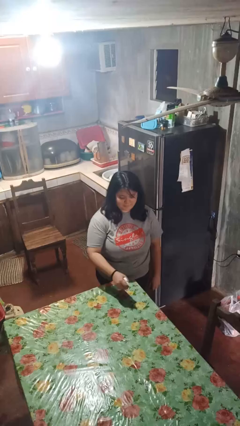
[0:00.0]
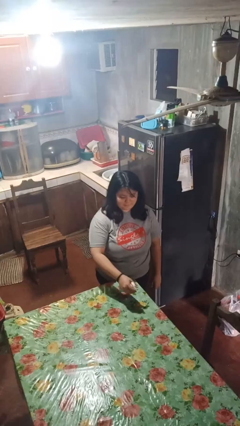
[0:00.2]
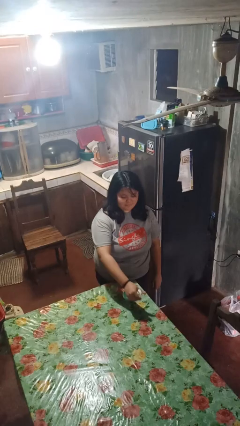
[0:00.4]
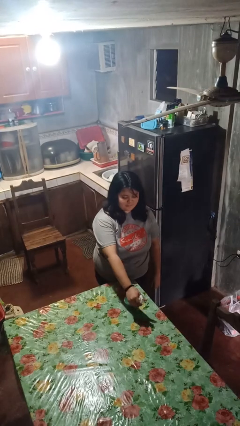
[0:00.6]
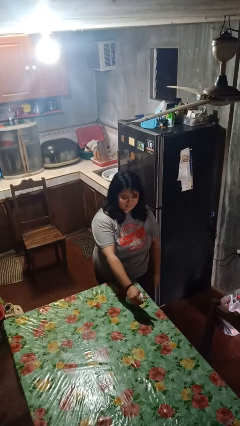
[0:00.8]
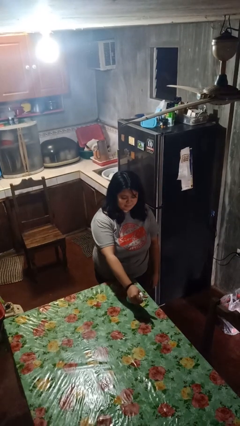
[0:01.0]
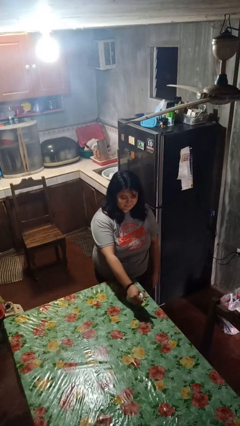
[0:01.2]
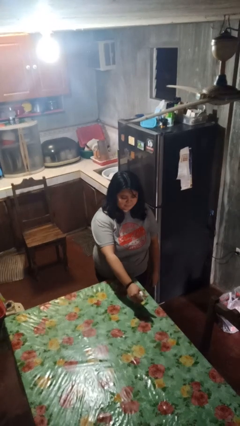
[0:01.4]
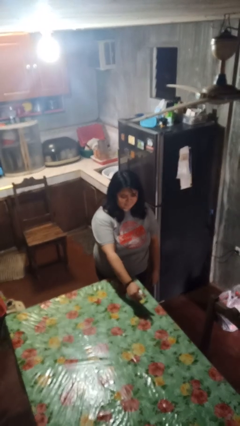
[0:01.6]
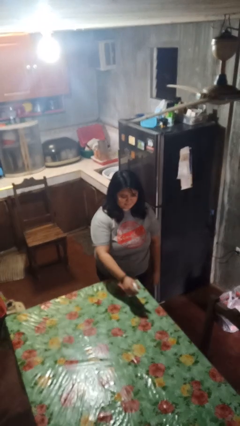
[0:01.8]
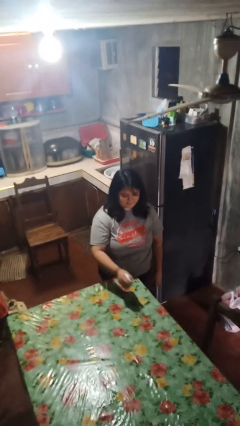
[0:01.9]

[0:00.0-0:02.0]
person sprays from bottle

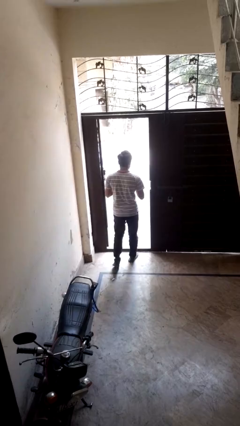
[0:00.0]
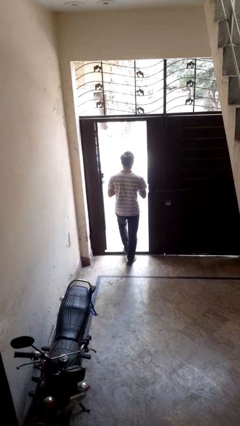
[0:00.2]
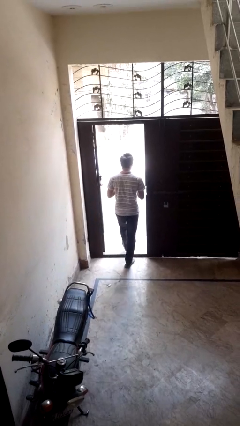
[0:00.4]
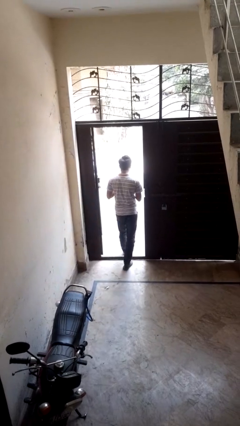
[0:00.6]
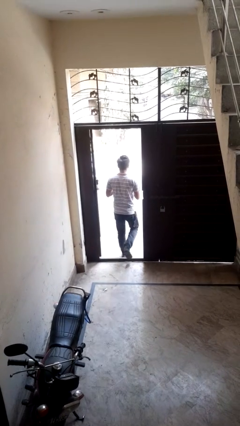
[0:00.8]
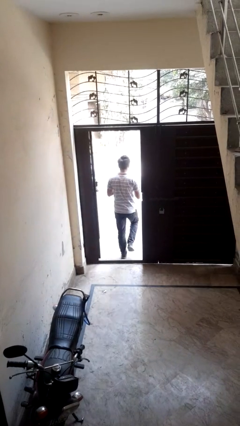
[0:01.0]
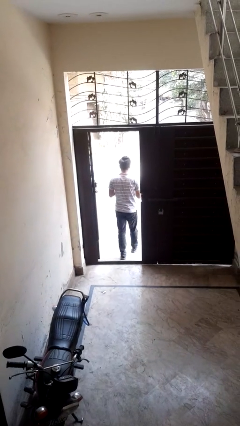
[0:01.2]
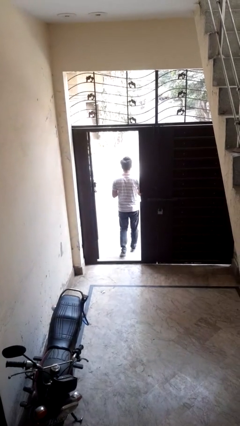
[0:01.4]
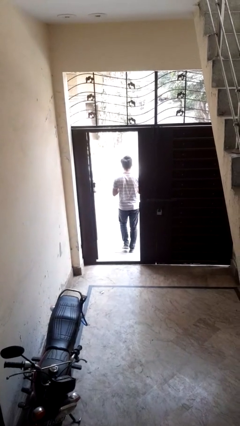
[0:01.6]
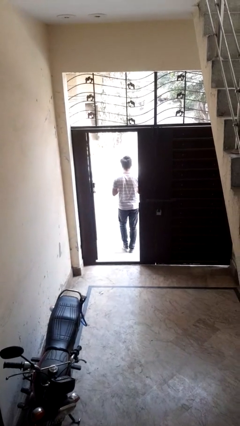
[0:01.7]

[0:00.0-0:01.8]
person exits scene through structure

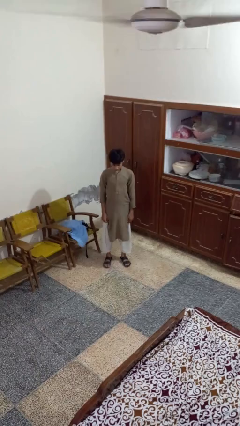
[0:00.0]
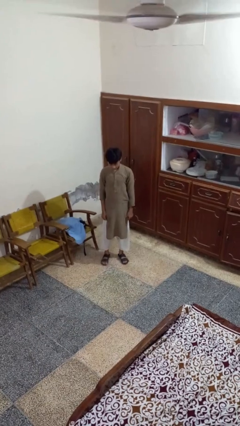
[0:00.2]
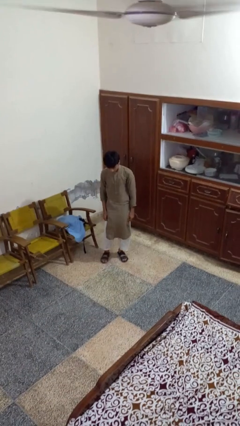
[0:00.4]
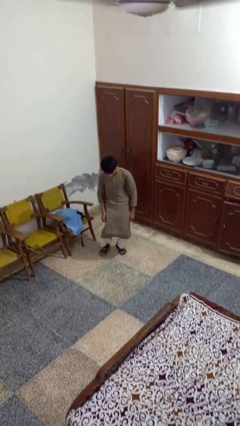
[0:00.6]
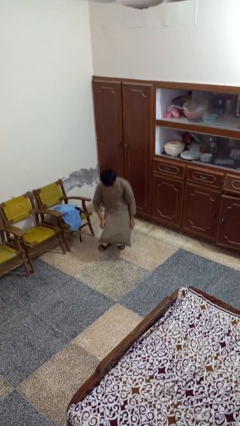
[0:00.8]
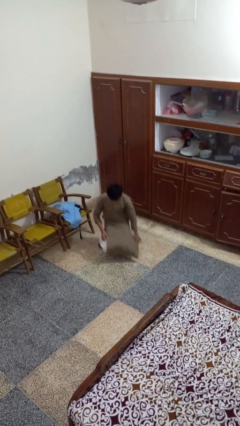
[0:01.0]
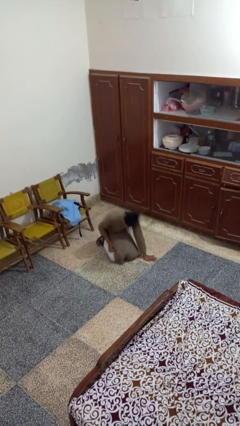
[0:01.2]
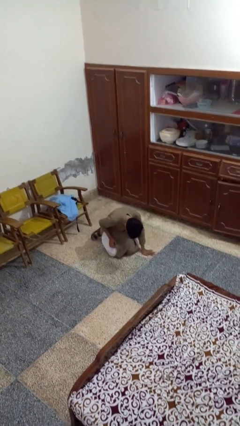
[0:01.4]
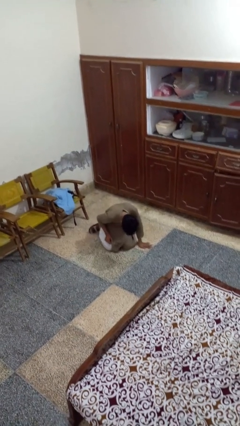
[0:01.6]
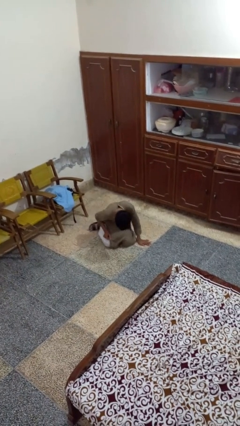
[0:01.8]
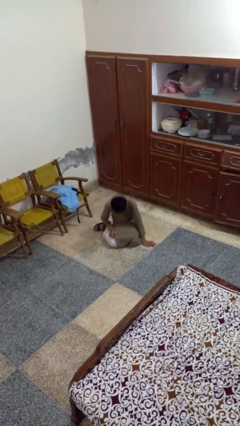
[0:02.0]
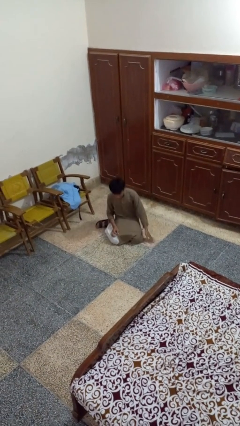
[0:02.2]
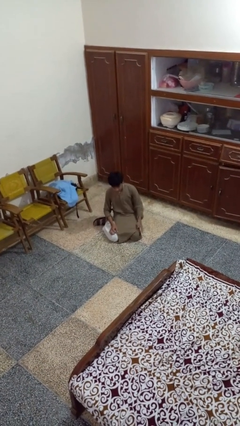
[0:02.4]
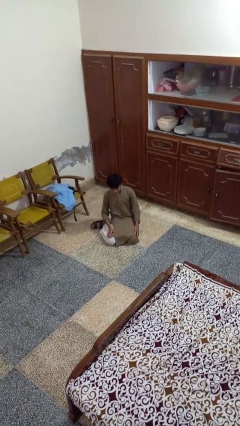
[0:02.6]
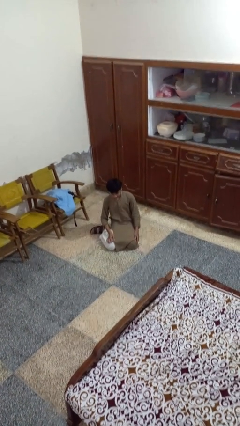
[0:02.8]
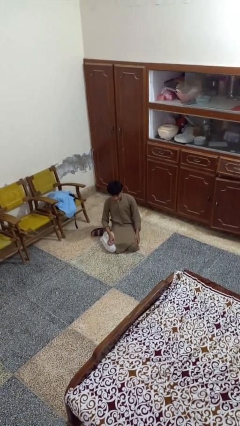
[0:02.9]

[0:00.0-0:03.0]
person falls while standing

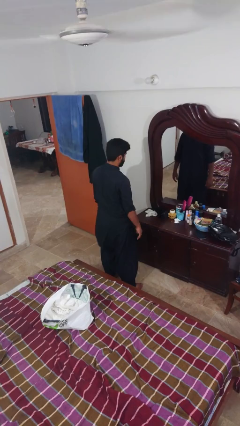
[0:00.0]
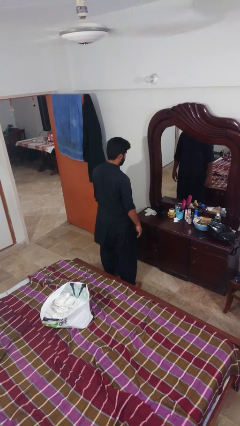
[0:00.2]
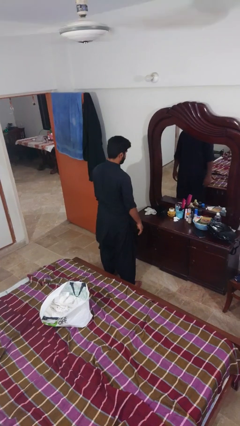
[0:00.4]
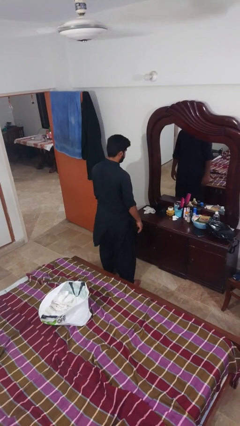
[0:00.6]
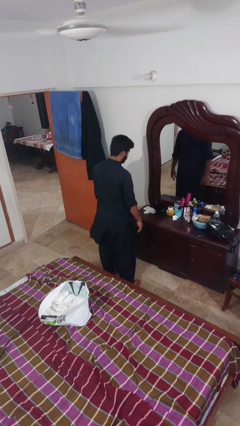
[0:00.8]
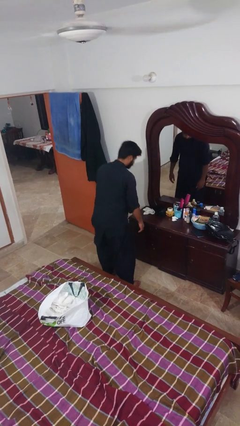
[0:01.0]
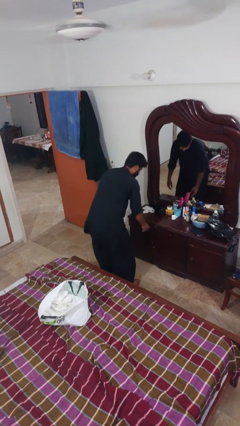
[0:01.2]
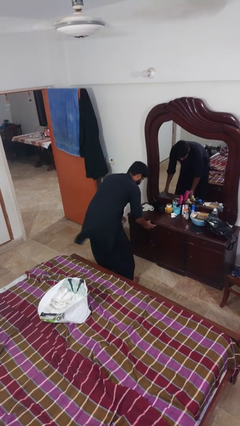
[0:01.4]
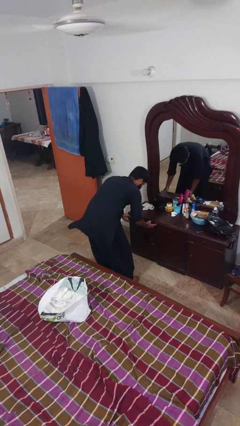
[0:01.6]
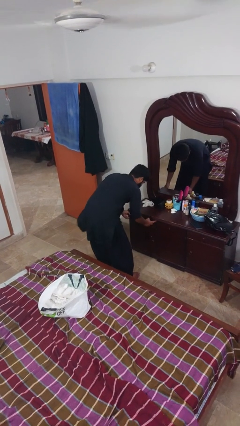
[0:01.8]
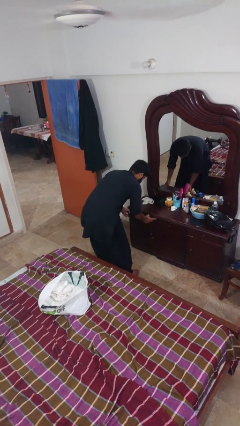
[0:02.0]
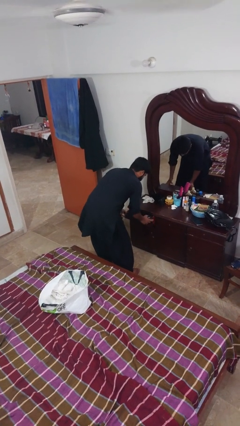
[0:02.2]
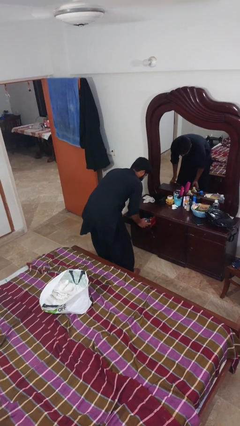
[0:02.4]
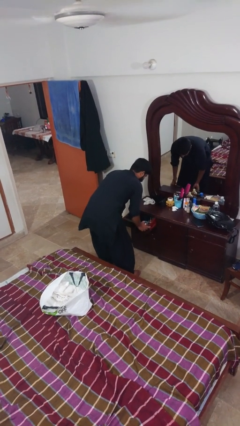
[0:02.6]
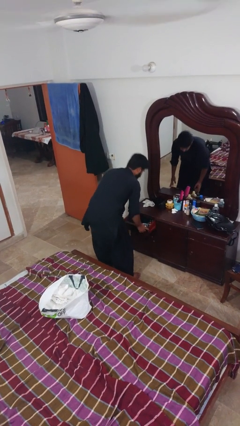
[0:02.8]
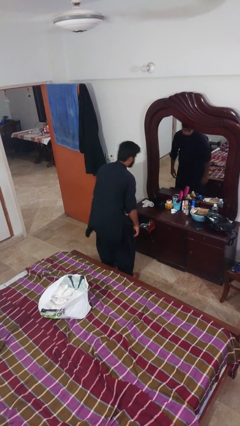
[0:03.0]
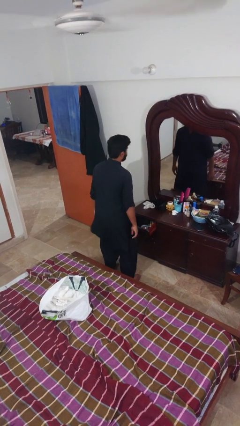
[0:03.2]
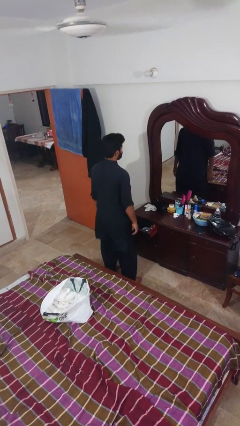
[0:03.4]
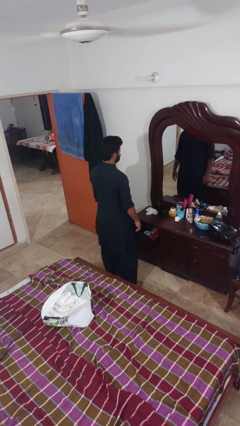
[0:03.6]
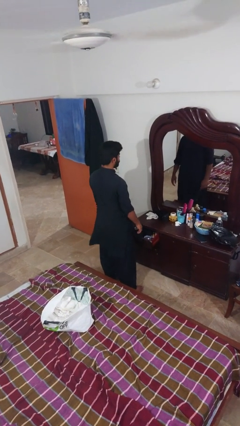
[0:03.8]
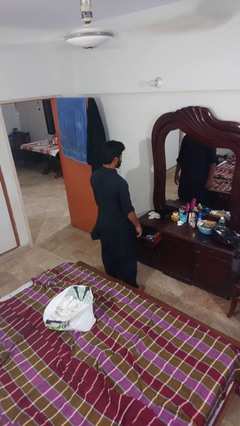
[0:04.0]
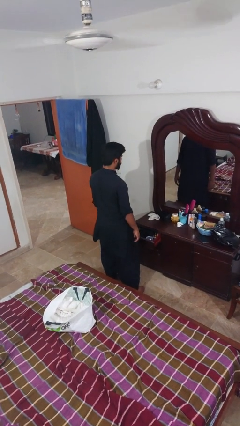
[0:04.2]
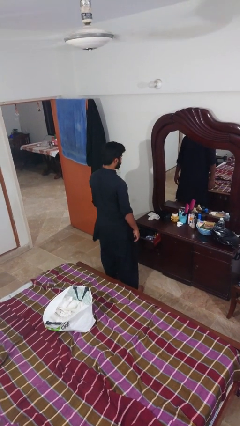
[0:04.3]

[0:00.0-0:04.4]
person opens dresser drawer

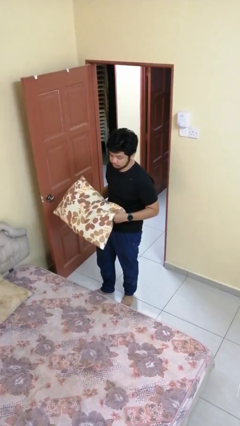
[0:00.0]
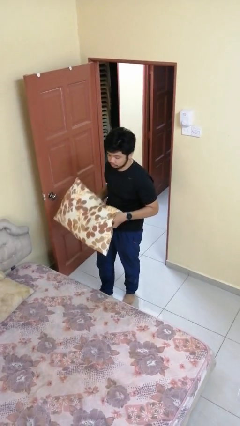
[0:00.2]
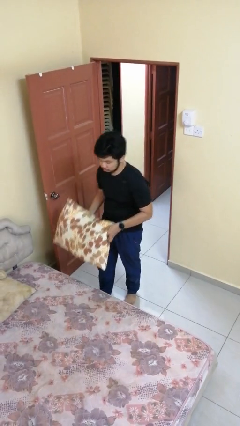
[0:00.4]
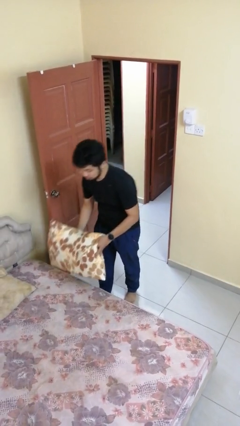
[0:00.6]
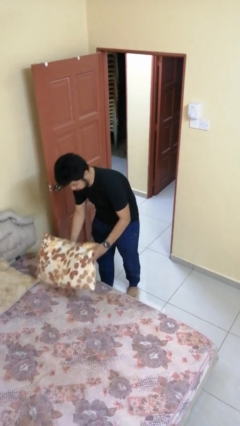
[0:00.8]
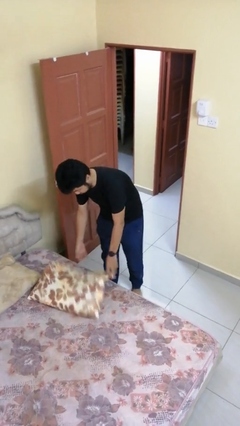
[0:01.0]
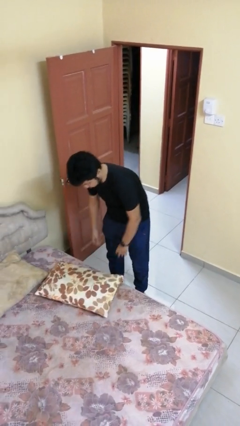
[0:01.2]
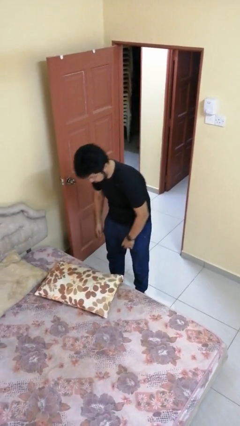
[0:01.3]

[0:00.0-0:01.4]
person puts down object on bed

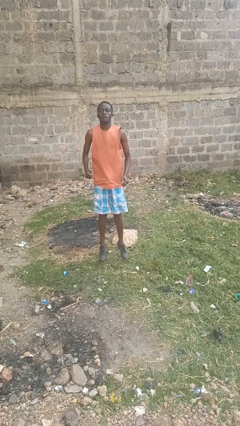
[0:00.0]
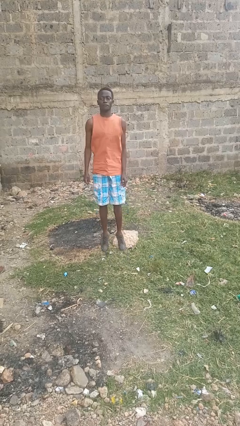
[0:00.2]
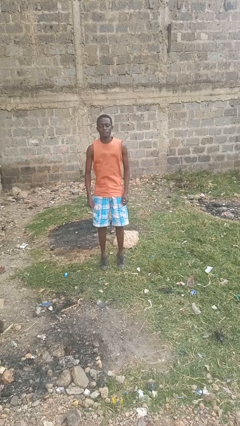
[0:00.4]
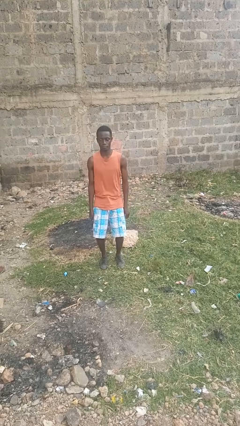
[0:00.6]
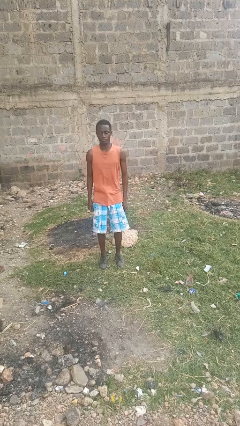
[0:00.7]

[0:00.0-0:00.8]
person jumps

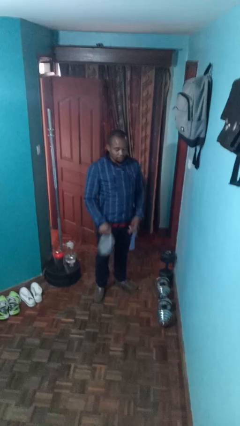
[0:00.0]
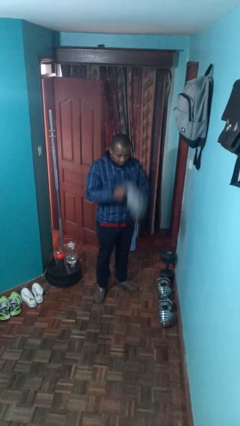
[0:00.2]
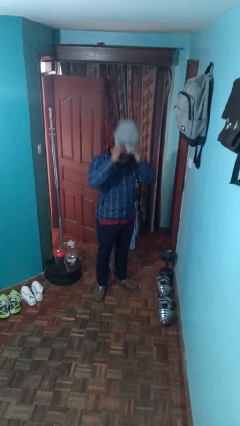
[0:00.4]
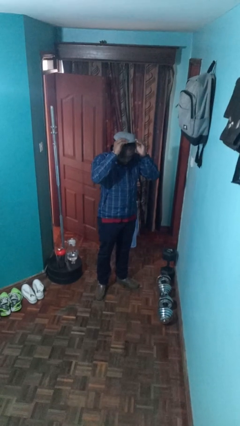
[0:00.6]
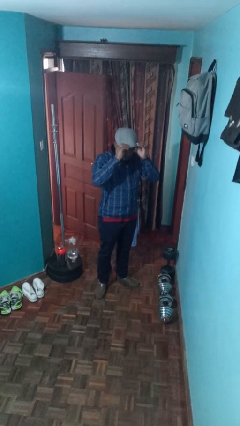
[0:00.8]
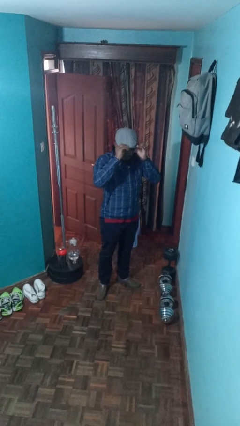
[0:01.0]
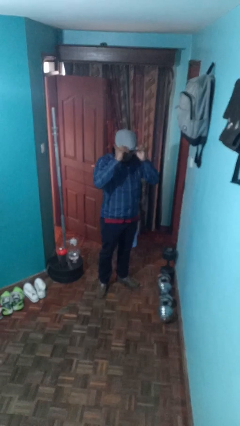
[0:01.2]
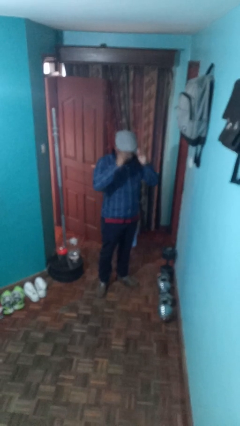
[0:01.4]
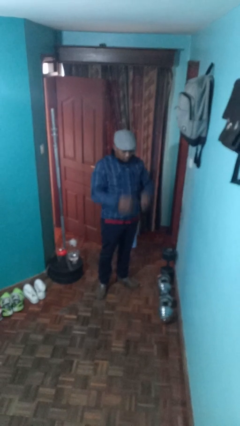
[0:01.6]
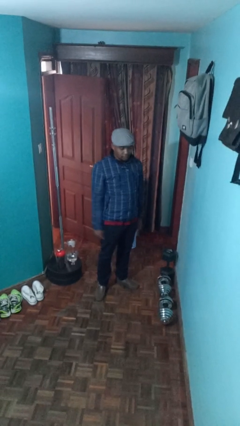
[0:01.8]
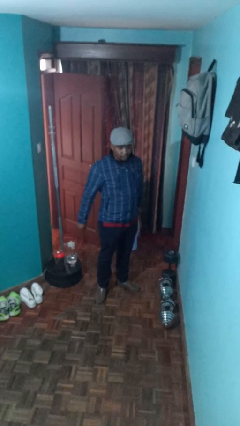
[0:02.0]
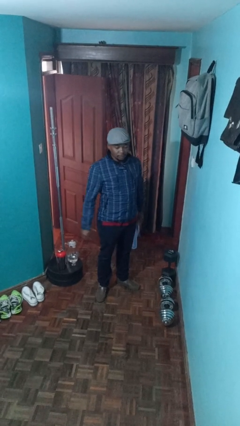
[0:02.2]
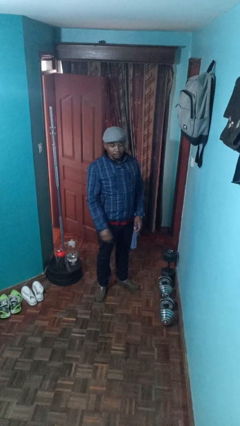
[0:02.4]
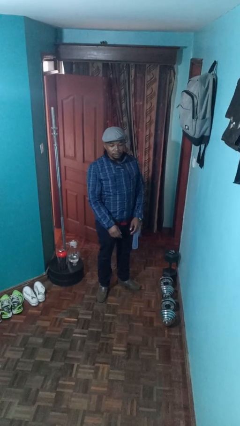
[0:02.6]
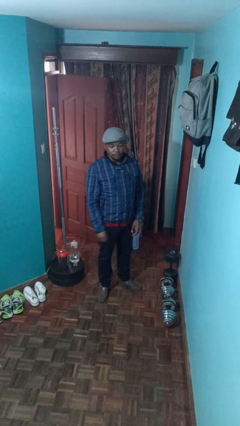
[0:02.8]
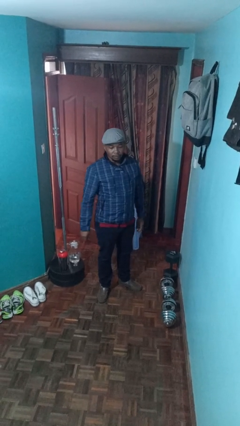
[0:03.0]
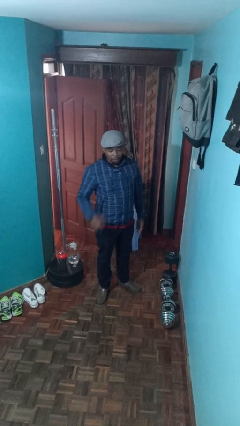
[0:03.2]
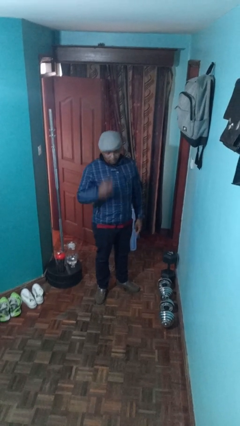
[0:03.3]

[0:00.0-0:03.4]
person puts on hat
